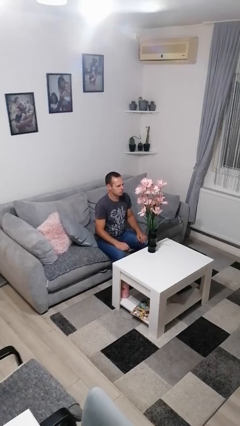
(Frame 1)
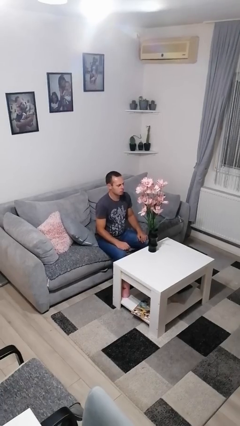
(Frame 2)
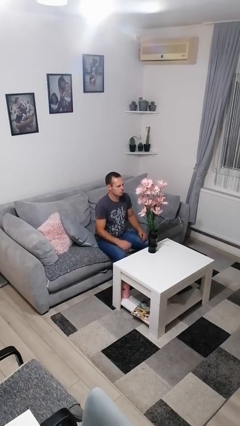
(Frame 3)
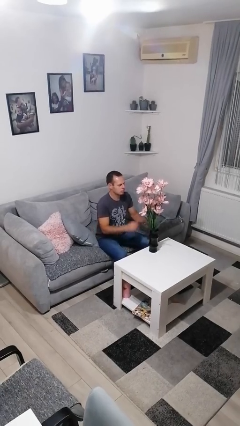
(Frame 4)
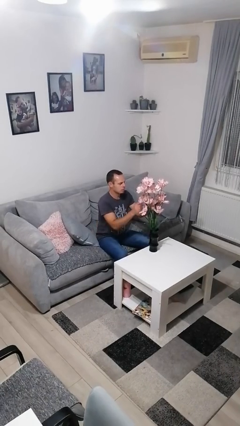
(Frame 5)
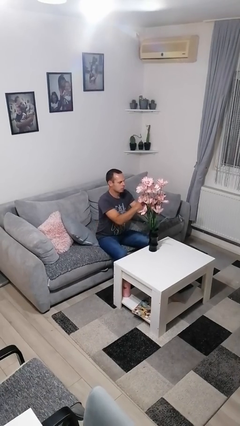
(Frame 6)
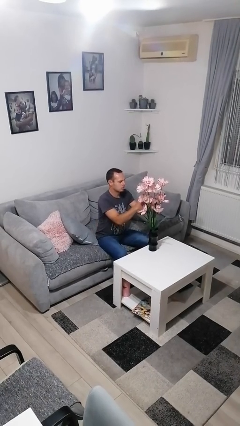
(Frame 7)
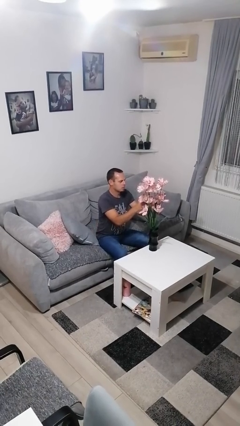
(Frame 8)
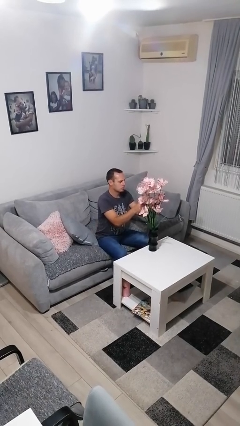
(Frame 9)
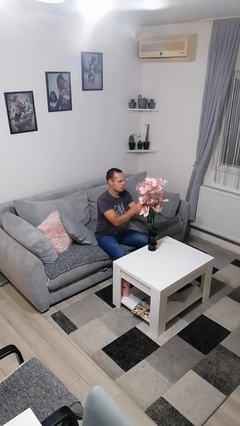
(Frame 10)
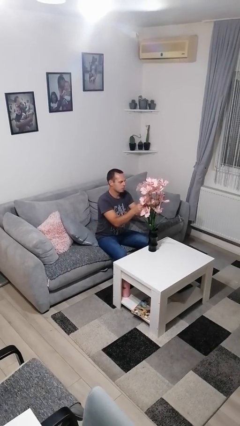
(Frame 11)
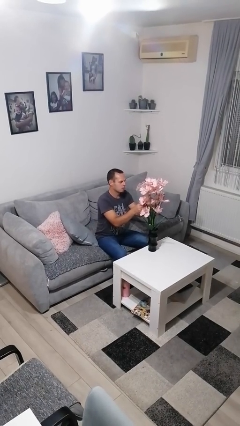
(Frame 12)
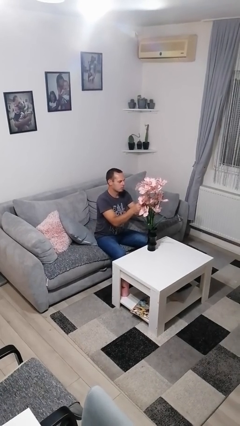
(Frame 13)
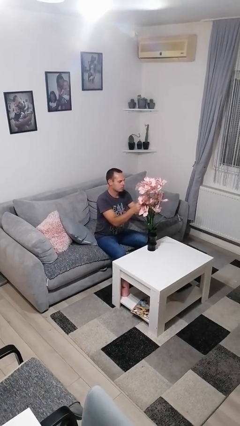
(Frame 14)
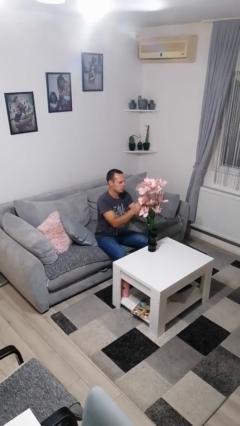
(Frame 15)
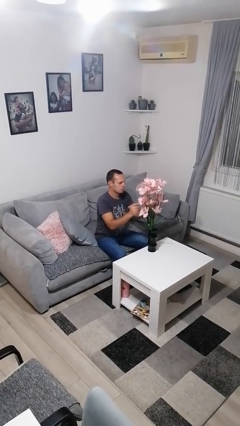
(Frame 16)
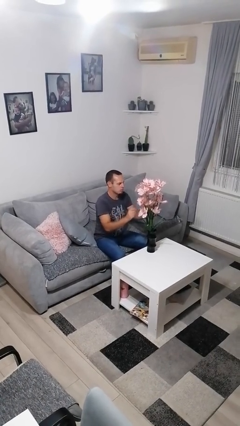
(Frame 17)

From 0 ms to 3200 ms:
person arranges flowers in vase

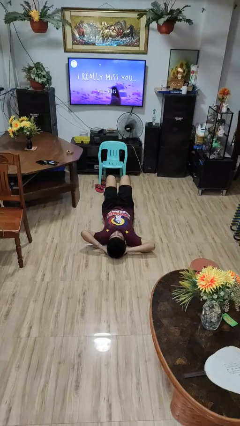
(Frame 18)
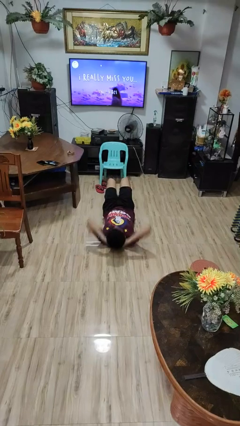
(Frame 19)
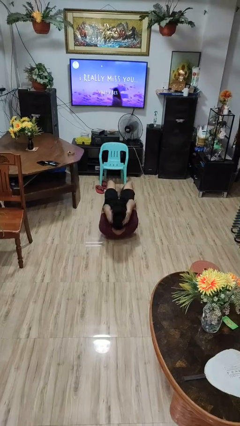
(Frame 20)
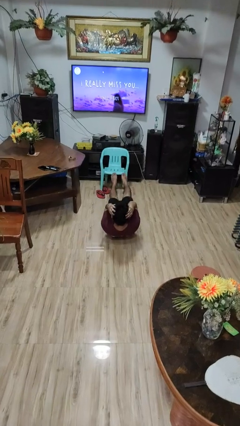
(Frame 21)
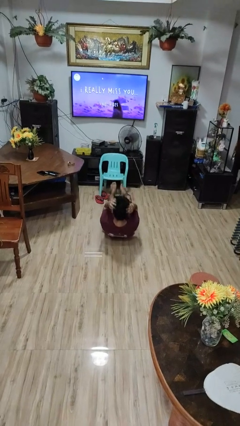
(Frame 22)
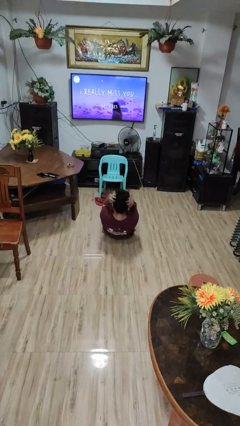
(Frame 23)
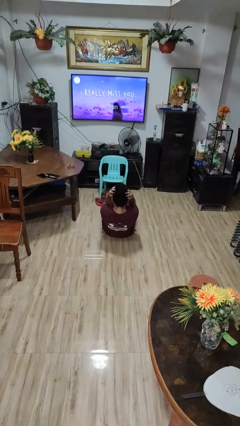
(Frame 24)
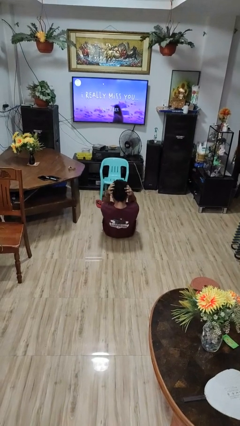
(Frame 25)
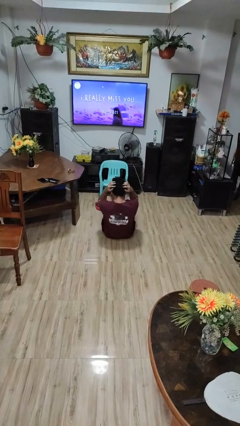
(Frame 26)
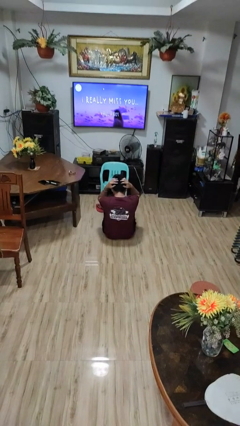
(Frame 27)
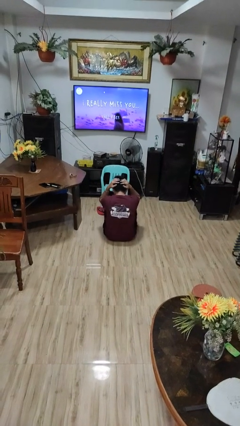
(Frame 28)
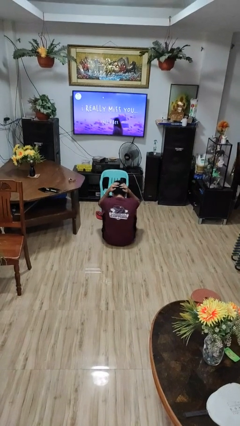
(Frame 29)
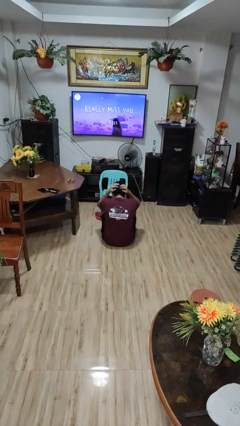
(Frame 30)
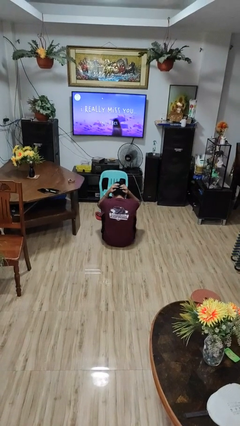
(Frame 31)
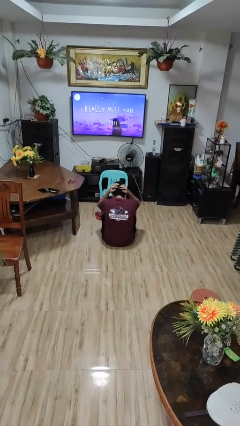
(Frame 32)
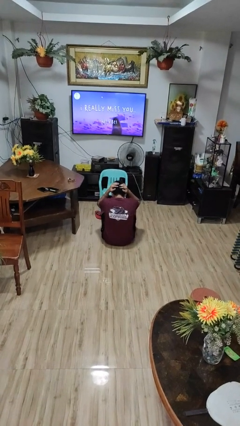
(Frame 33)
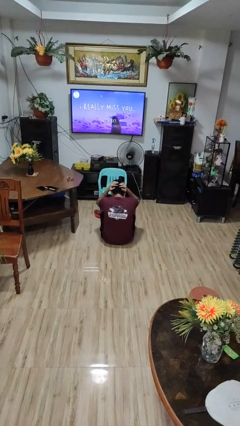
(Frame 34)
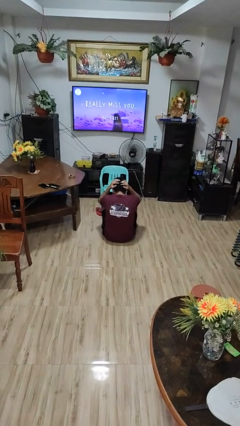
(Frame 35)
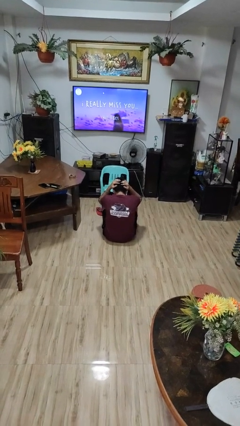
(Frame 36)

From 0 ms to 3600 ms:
person exercises with situp

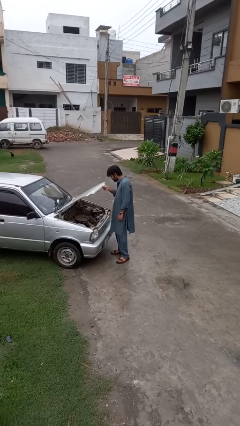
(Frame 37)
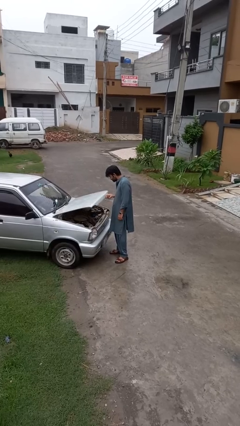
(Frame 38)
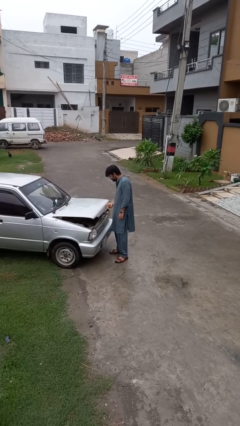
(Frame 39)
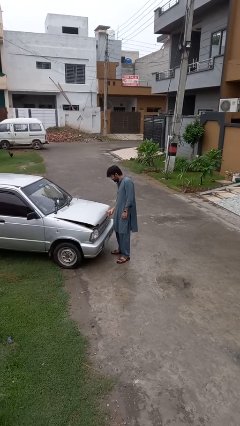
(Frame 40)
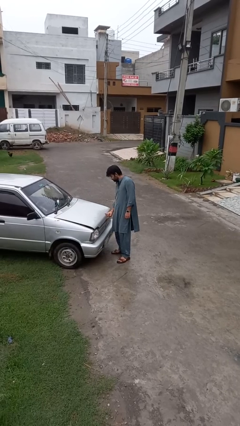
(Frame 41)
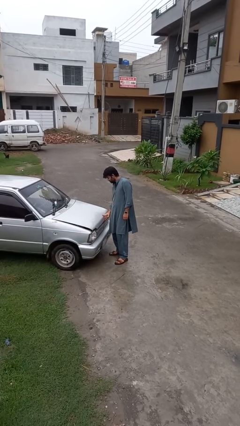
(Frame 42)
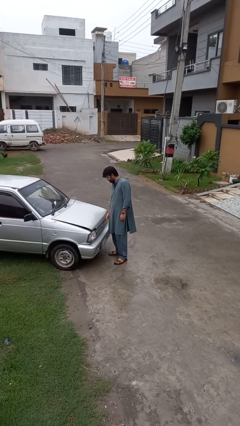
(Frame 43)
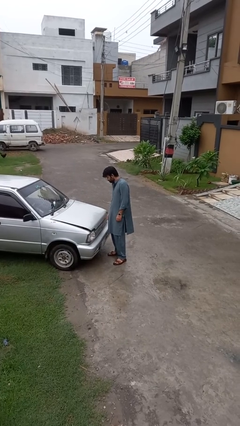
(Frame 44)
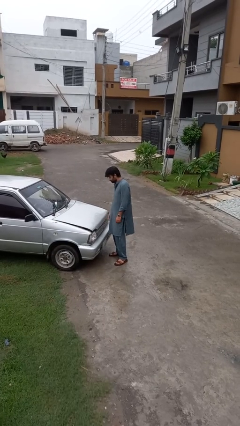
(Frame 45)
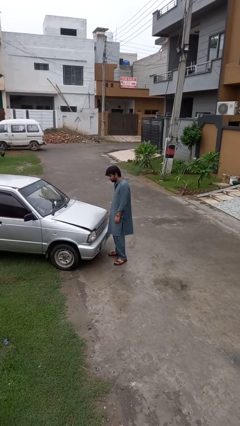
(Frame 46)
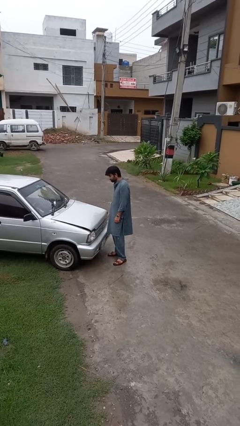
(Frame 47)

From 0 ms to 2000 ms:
person closes car hood

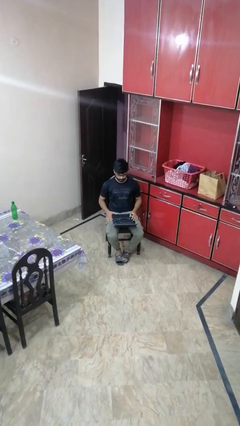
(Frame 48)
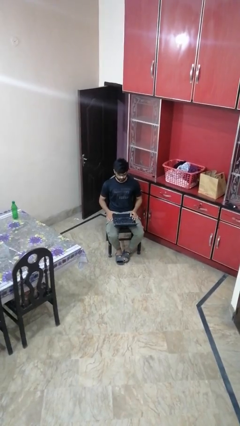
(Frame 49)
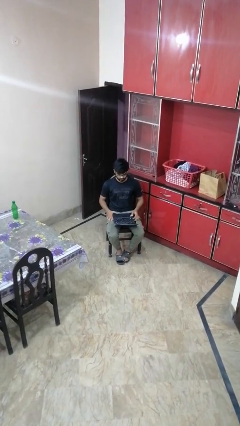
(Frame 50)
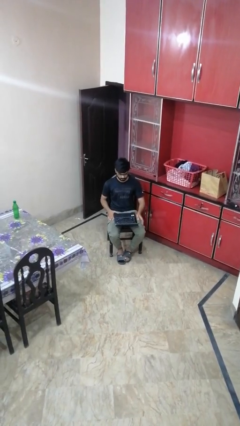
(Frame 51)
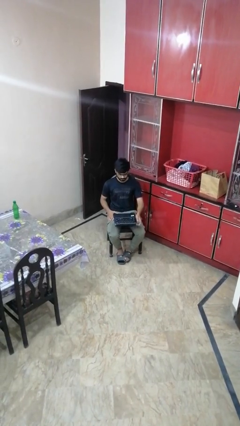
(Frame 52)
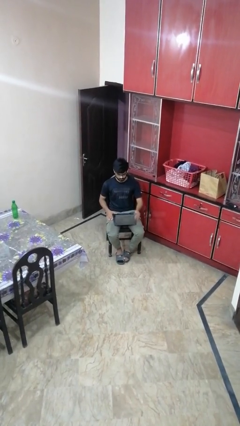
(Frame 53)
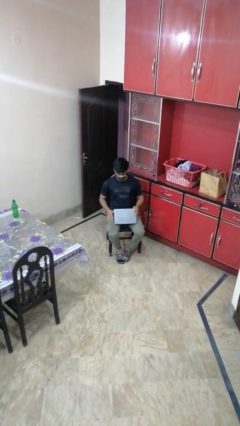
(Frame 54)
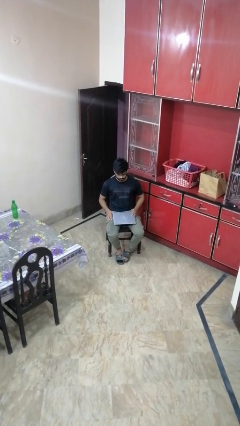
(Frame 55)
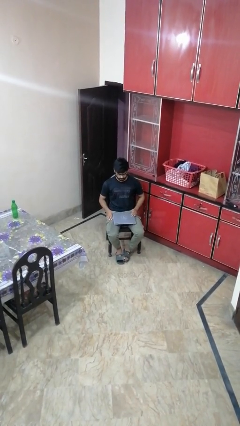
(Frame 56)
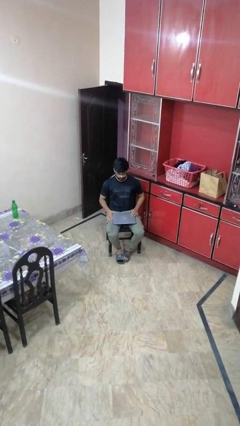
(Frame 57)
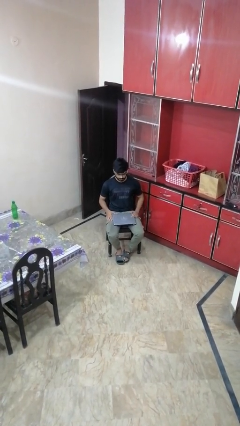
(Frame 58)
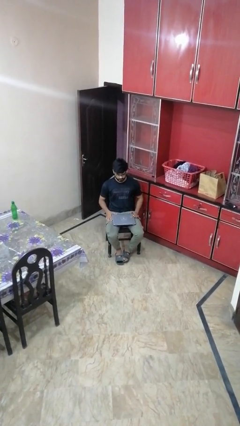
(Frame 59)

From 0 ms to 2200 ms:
person closes laptop

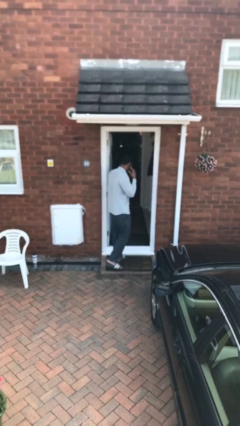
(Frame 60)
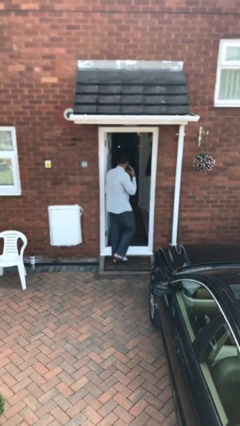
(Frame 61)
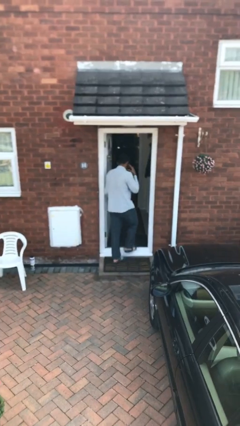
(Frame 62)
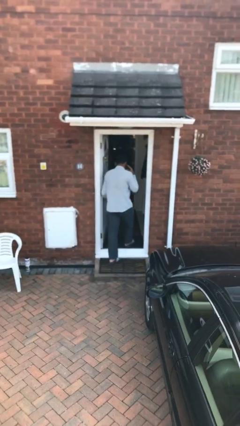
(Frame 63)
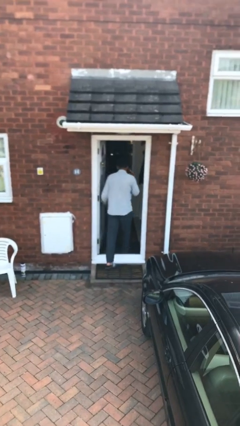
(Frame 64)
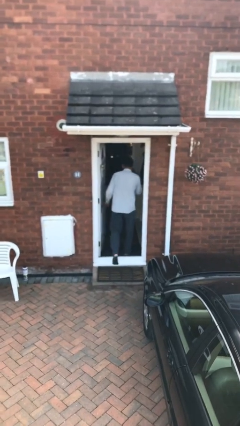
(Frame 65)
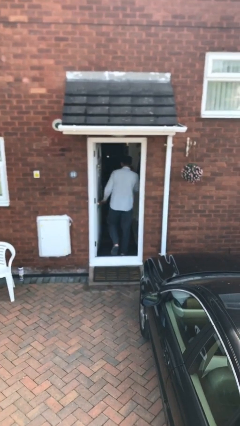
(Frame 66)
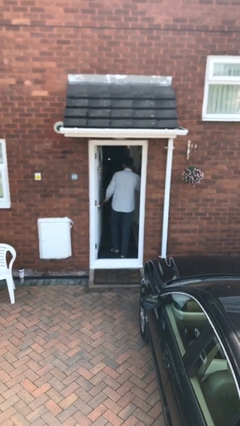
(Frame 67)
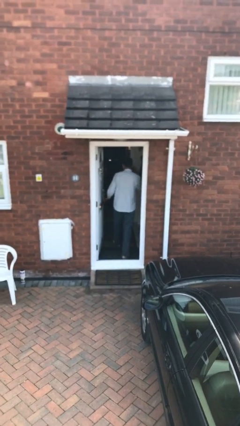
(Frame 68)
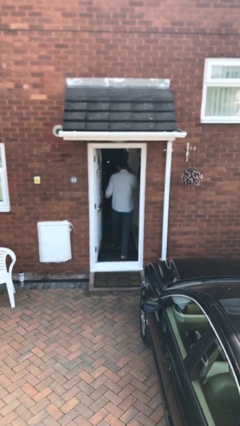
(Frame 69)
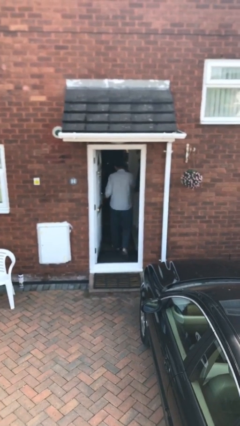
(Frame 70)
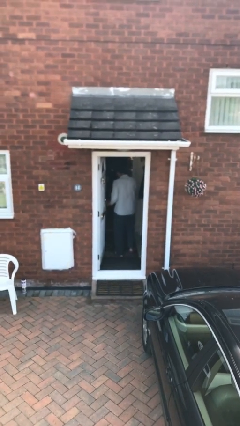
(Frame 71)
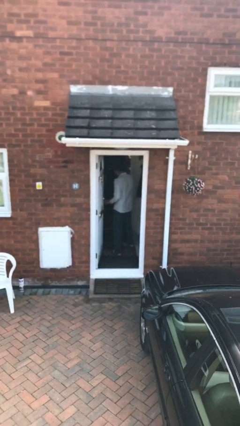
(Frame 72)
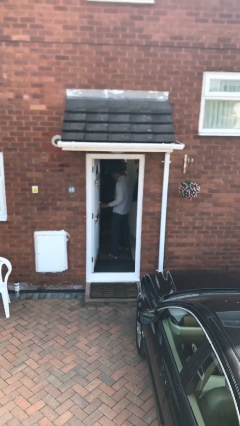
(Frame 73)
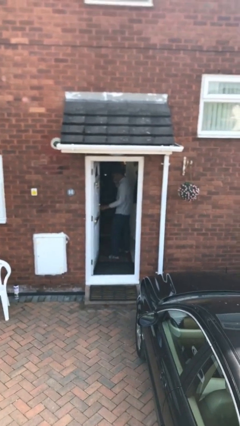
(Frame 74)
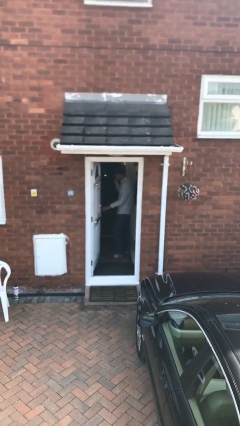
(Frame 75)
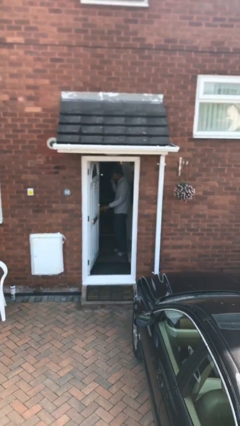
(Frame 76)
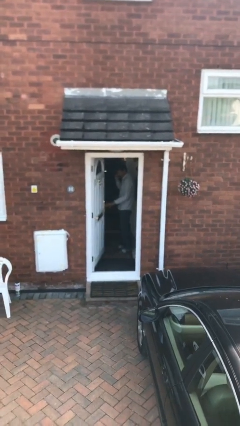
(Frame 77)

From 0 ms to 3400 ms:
person exits scene through structure

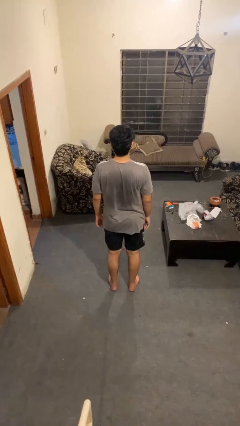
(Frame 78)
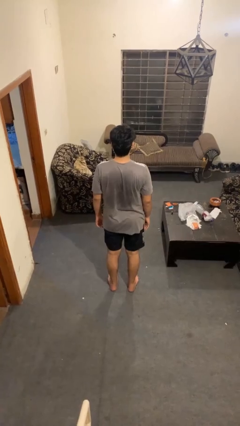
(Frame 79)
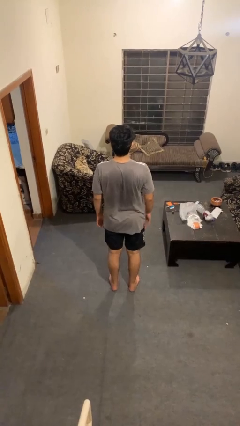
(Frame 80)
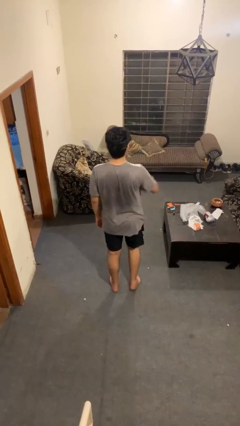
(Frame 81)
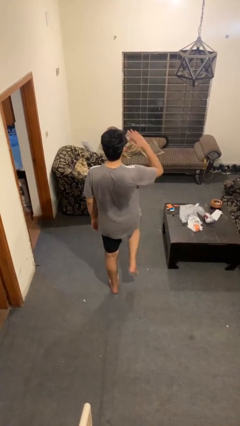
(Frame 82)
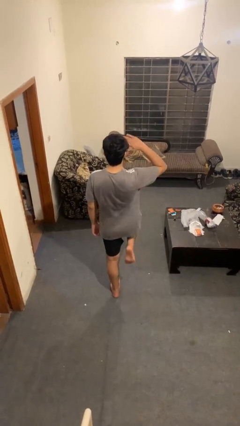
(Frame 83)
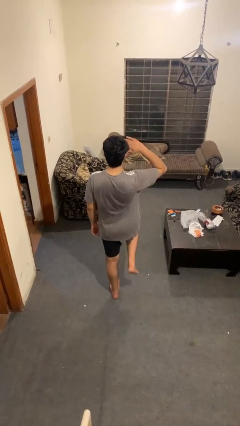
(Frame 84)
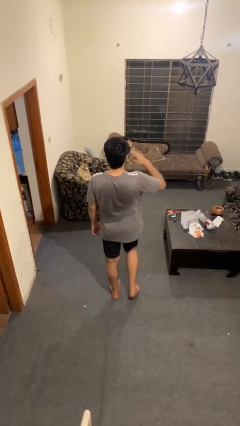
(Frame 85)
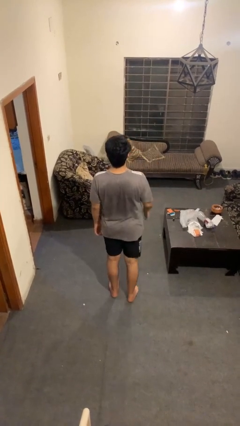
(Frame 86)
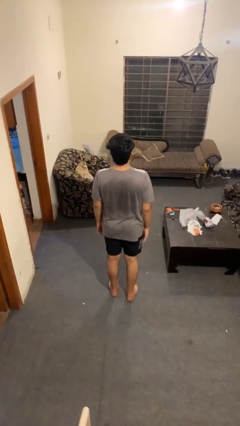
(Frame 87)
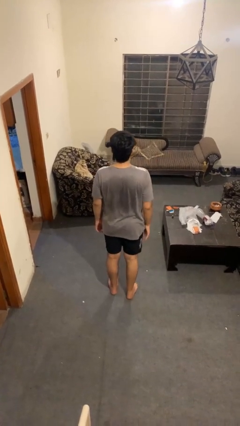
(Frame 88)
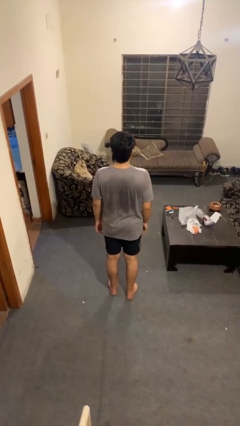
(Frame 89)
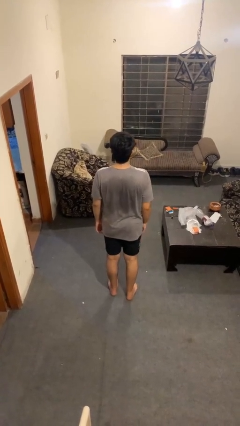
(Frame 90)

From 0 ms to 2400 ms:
person salutes

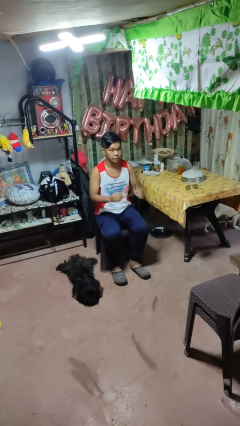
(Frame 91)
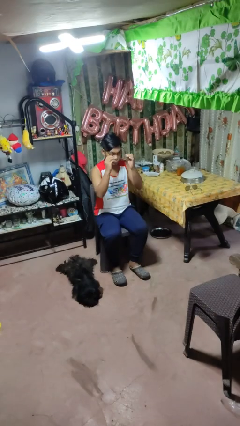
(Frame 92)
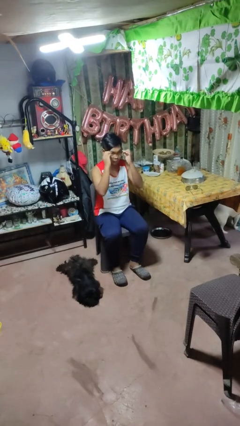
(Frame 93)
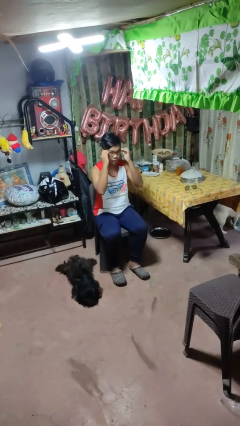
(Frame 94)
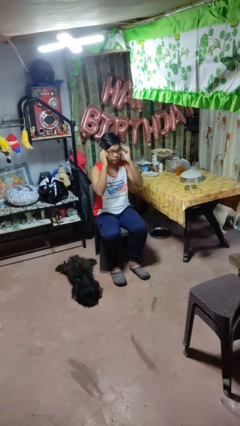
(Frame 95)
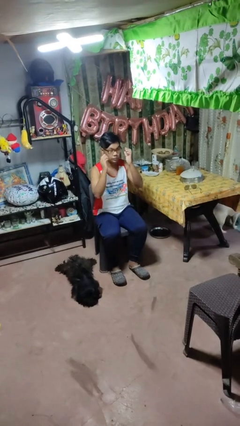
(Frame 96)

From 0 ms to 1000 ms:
person puts on glasses
